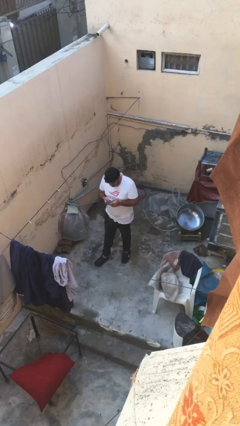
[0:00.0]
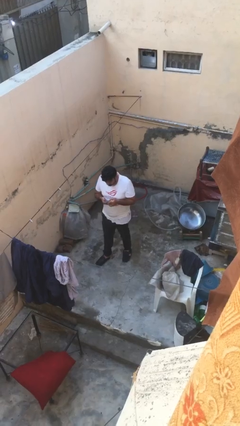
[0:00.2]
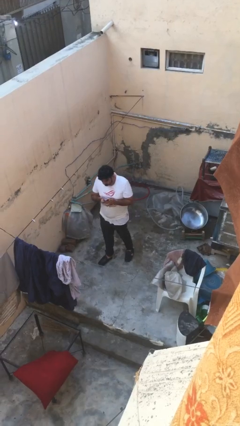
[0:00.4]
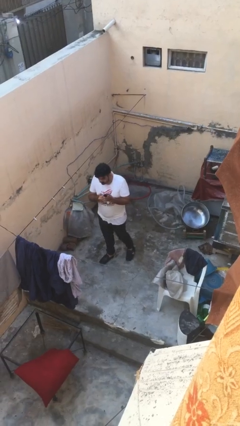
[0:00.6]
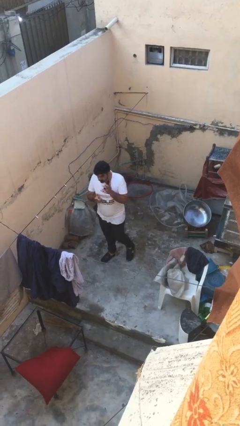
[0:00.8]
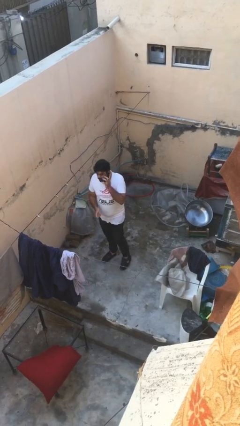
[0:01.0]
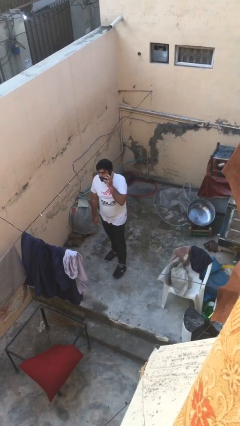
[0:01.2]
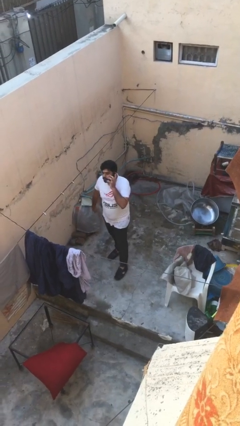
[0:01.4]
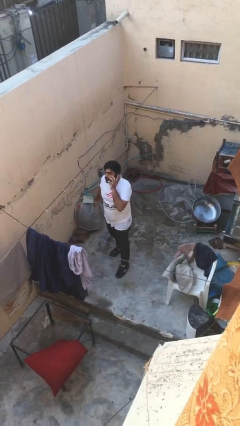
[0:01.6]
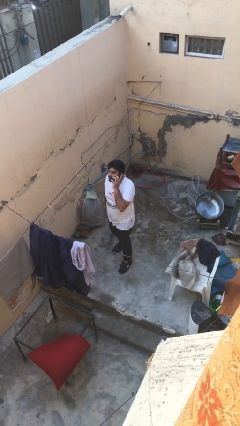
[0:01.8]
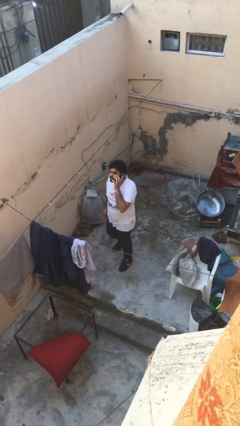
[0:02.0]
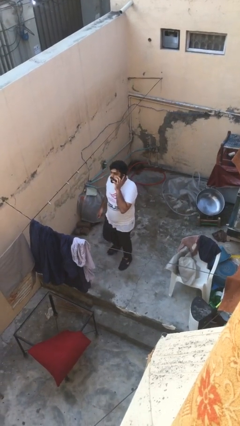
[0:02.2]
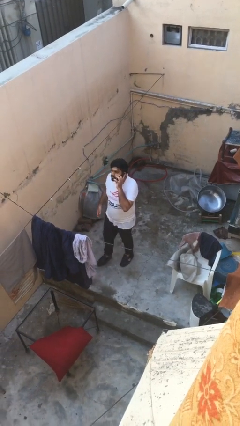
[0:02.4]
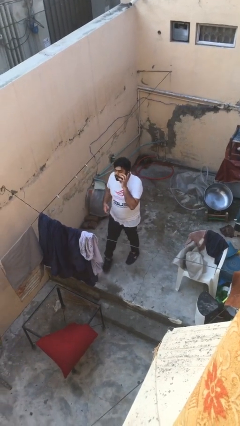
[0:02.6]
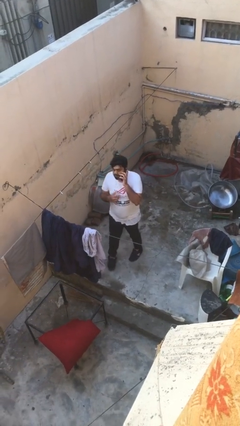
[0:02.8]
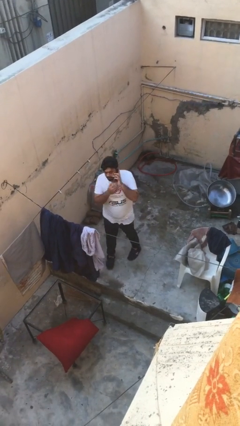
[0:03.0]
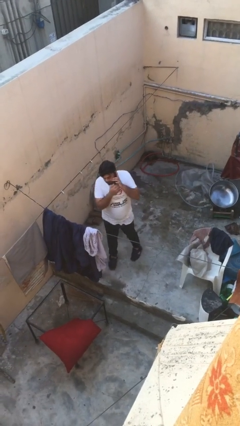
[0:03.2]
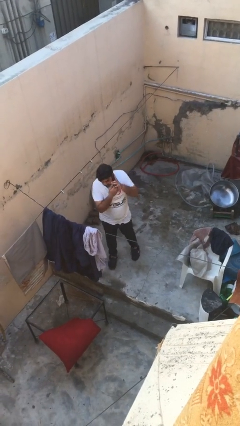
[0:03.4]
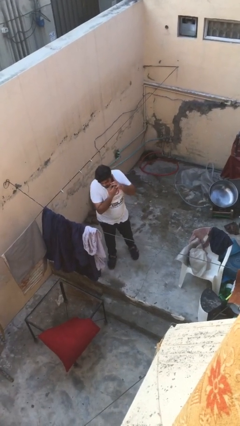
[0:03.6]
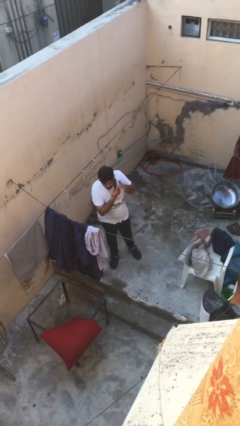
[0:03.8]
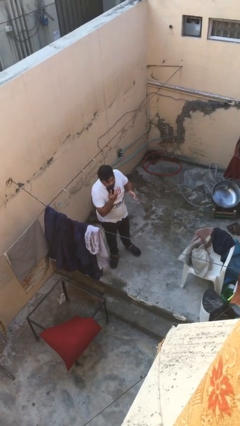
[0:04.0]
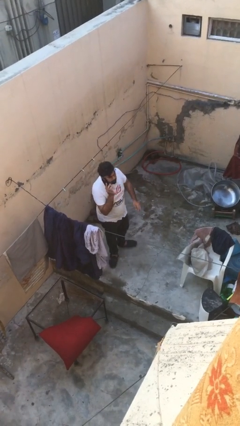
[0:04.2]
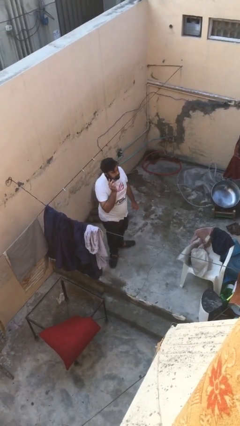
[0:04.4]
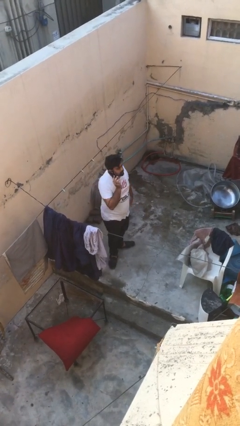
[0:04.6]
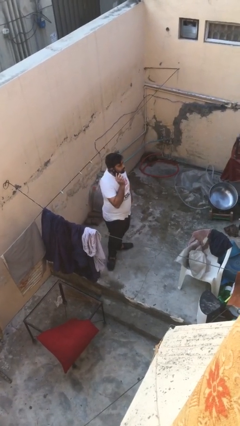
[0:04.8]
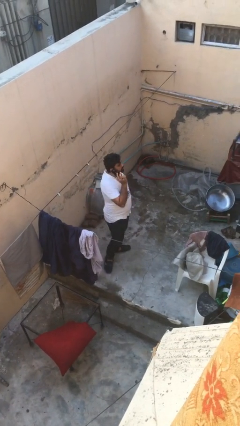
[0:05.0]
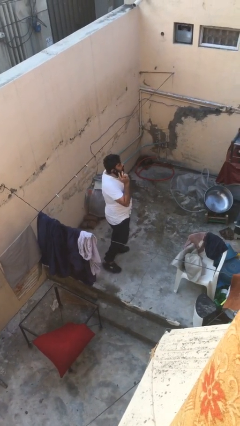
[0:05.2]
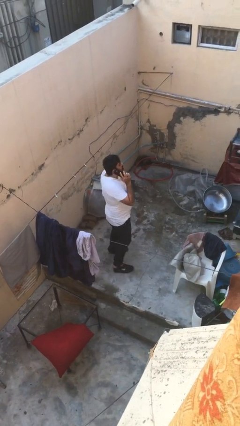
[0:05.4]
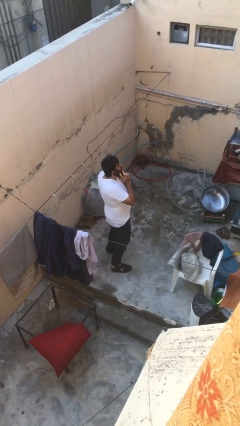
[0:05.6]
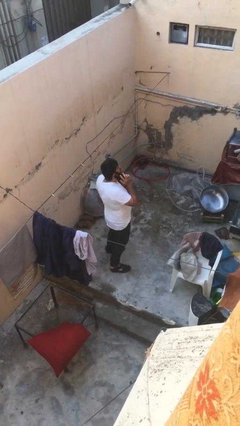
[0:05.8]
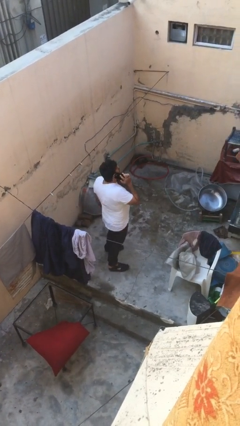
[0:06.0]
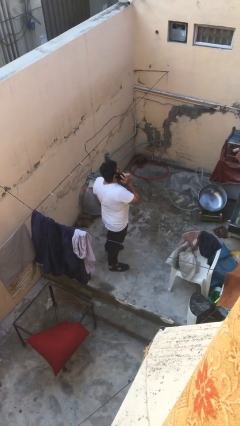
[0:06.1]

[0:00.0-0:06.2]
person talks on phone

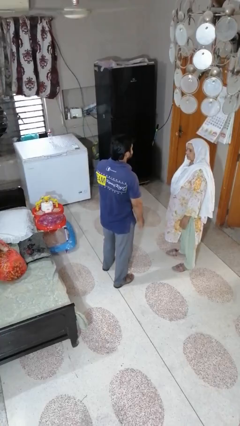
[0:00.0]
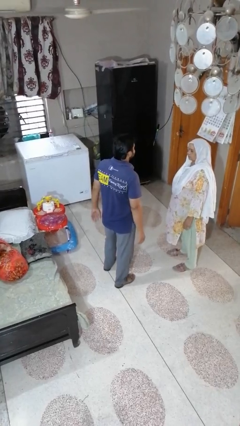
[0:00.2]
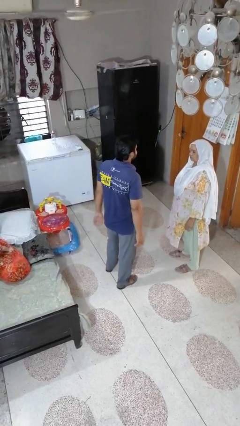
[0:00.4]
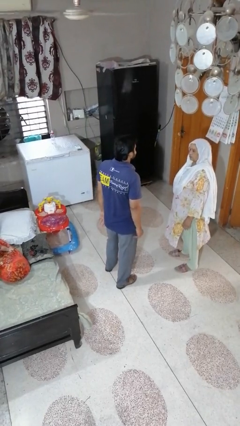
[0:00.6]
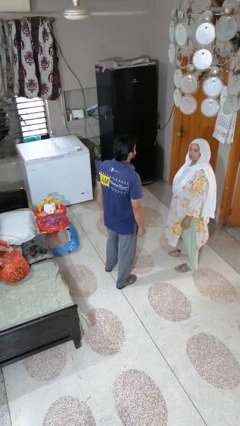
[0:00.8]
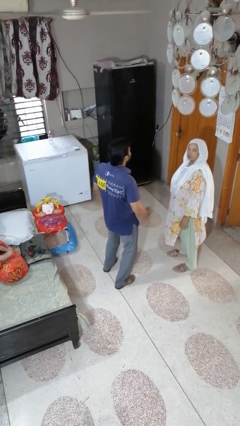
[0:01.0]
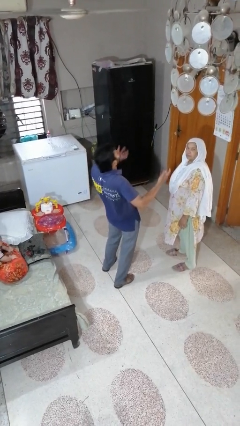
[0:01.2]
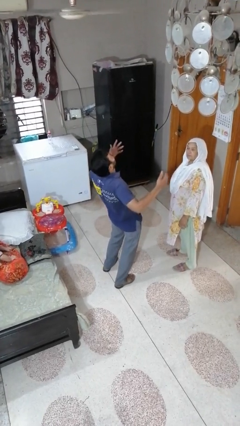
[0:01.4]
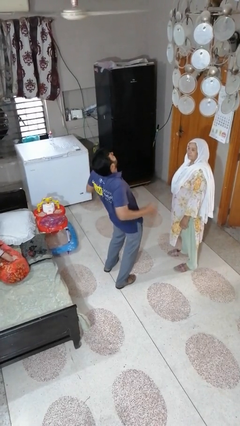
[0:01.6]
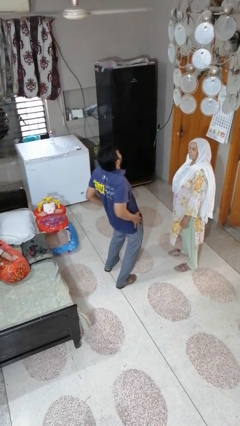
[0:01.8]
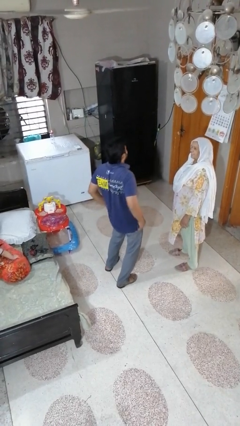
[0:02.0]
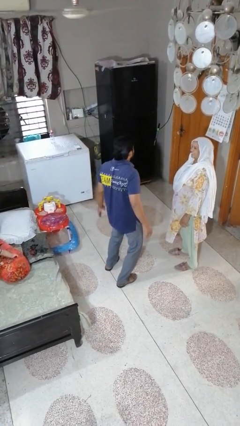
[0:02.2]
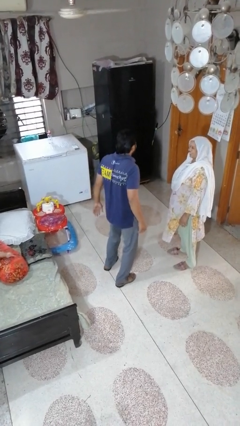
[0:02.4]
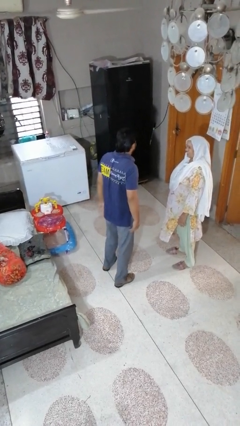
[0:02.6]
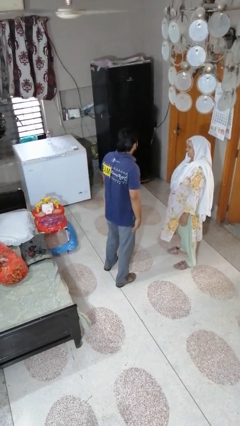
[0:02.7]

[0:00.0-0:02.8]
person laughs with person

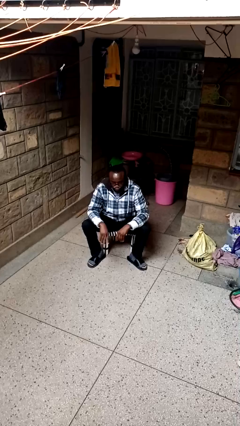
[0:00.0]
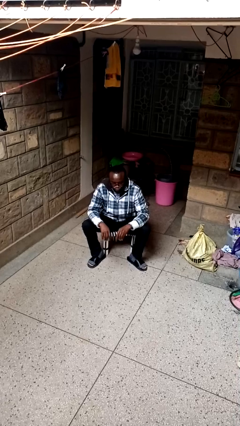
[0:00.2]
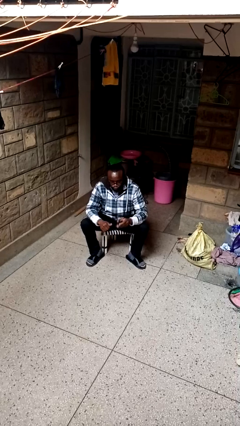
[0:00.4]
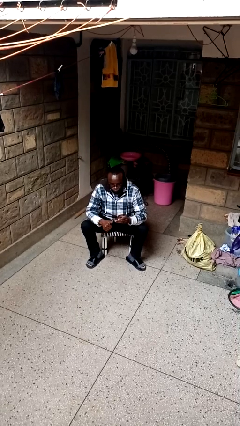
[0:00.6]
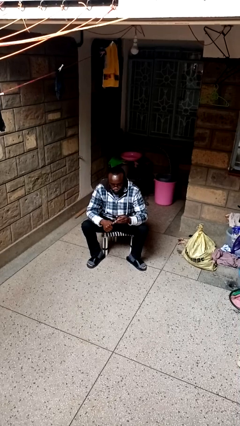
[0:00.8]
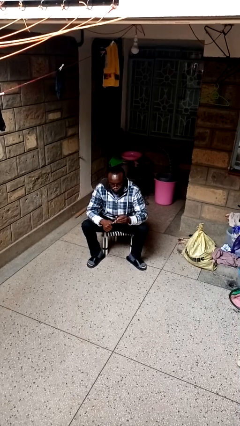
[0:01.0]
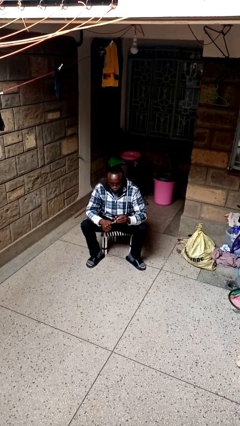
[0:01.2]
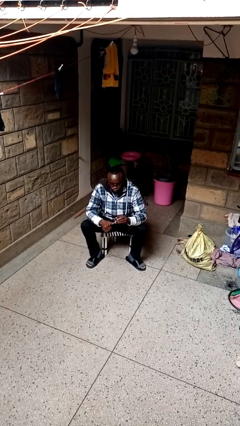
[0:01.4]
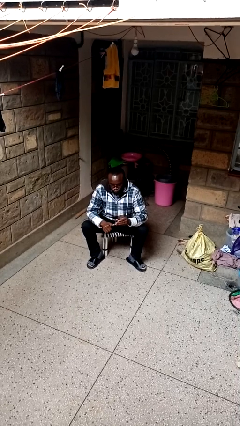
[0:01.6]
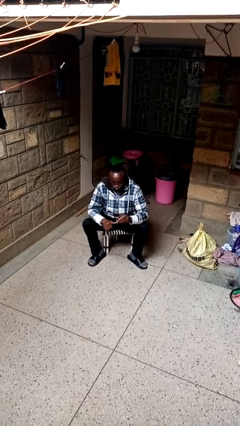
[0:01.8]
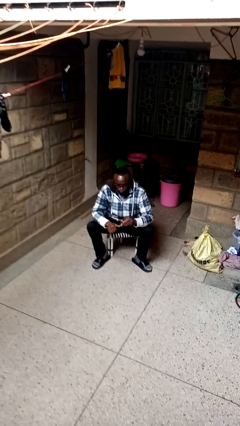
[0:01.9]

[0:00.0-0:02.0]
person clips fingernails

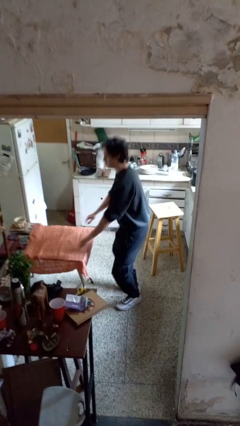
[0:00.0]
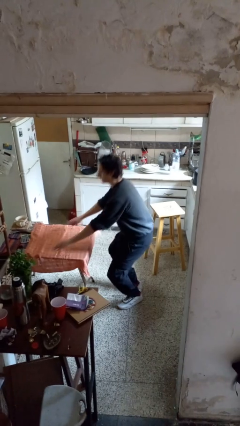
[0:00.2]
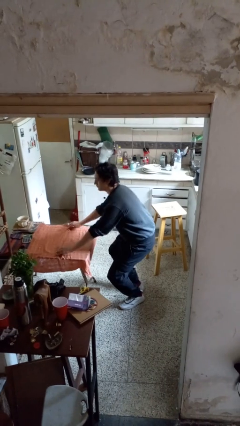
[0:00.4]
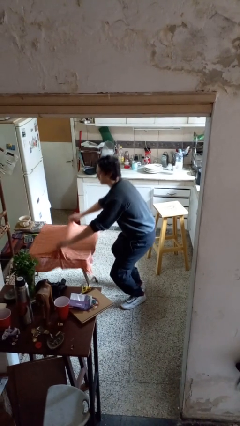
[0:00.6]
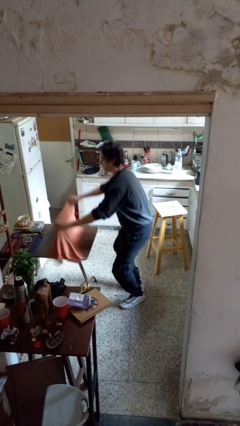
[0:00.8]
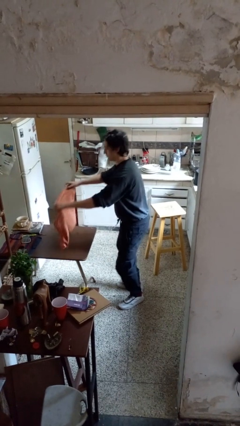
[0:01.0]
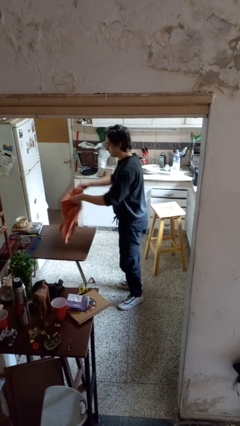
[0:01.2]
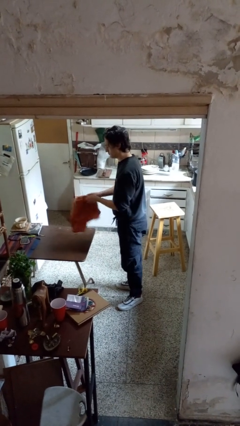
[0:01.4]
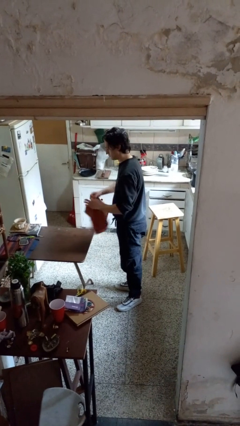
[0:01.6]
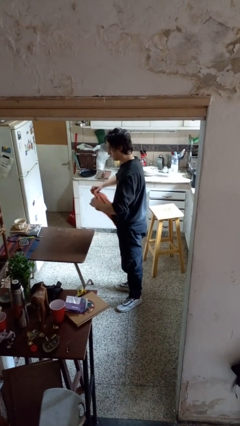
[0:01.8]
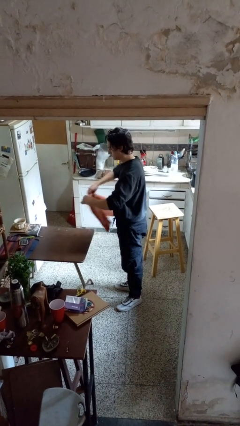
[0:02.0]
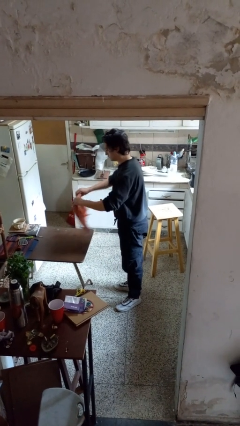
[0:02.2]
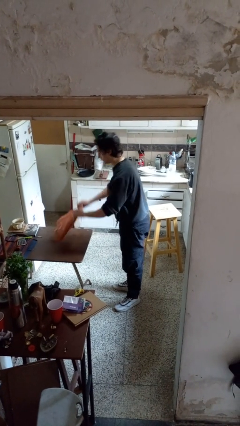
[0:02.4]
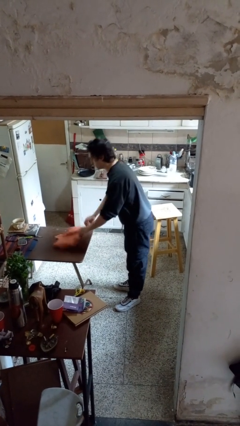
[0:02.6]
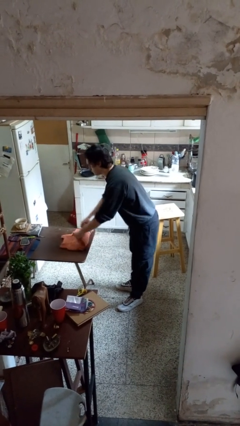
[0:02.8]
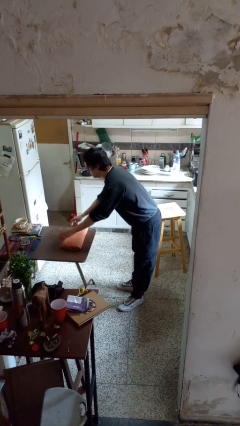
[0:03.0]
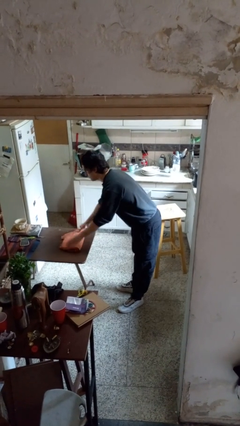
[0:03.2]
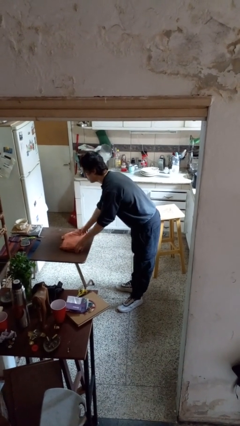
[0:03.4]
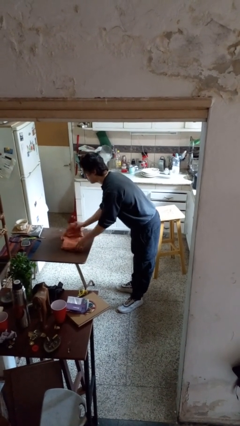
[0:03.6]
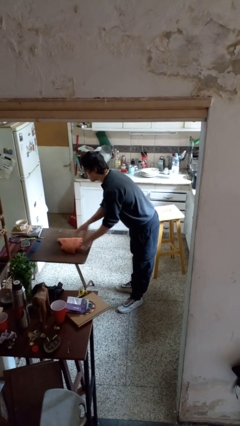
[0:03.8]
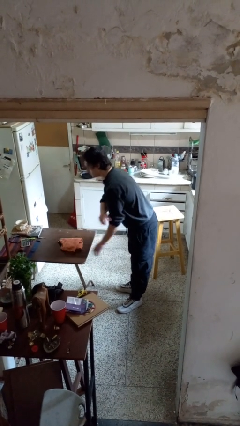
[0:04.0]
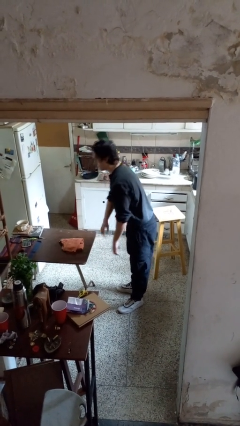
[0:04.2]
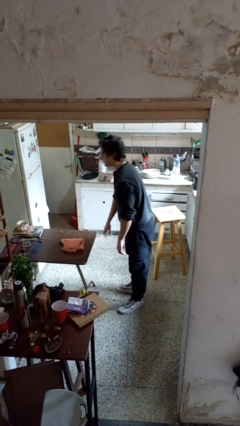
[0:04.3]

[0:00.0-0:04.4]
person folds tablecloth

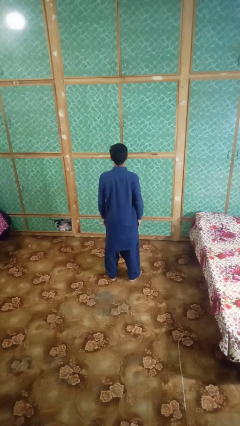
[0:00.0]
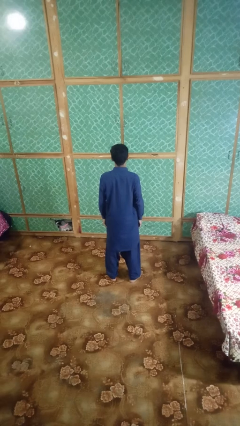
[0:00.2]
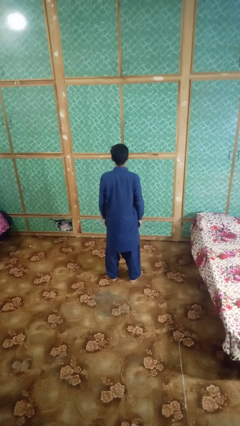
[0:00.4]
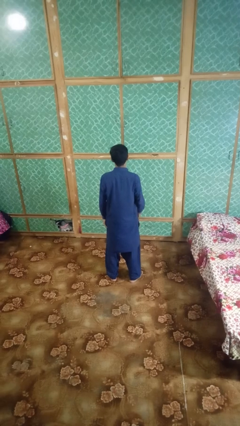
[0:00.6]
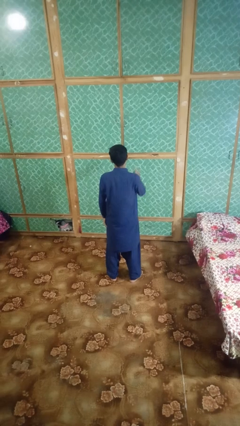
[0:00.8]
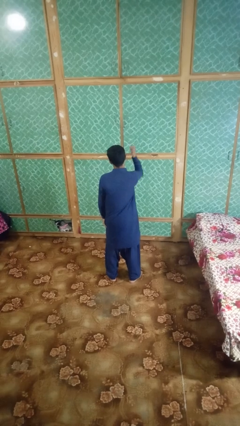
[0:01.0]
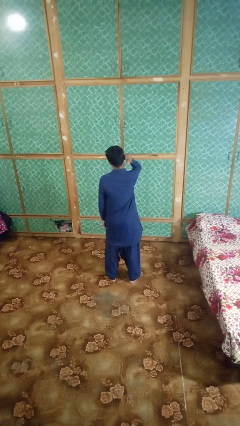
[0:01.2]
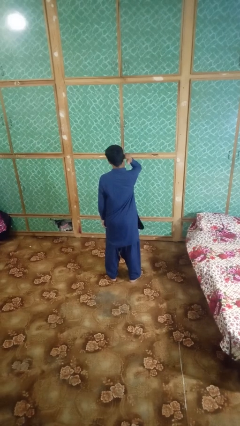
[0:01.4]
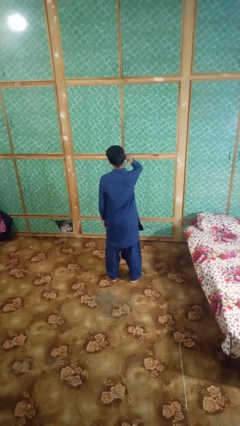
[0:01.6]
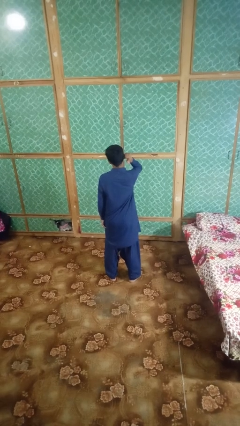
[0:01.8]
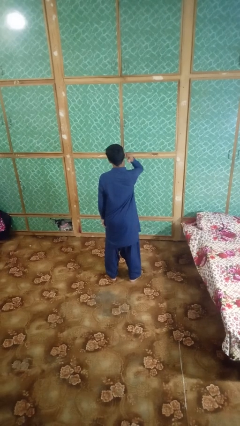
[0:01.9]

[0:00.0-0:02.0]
person gestures behind me
